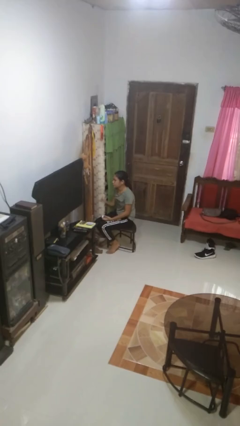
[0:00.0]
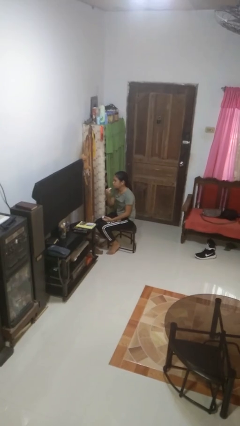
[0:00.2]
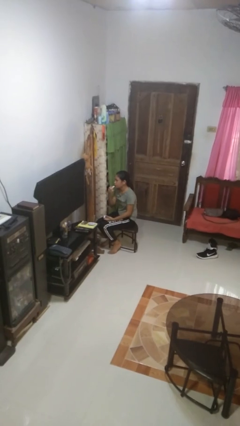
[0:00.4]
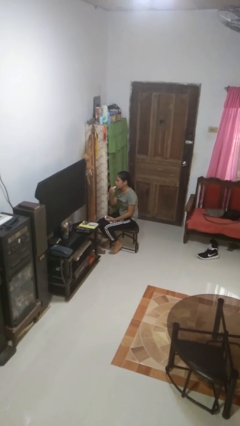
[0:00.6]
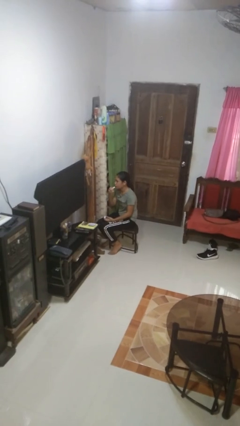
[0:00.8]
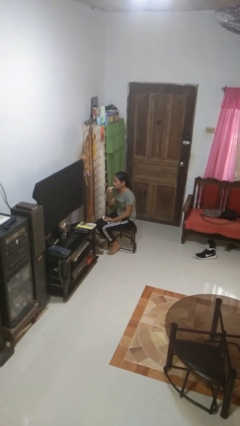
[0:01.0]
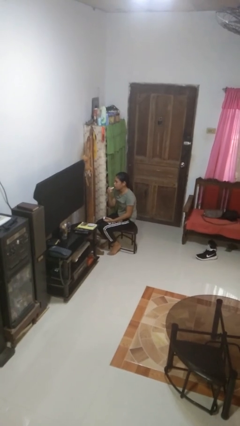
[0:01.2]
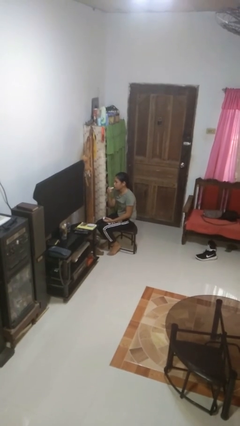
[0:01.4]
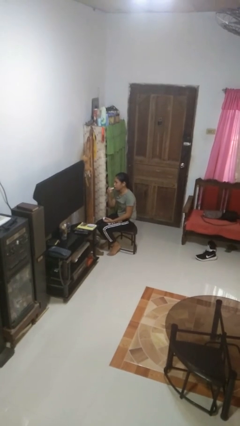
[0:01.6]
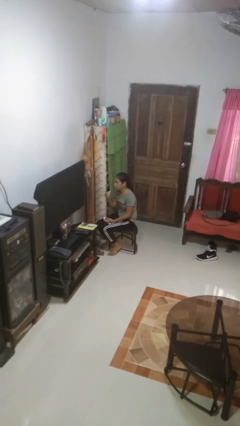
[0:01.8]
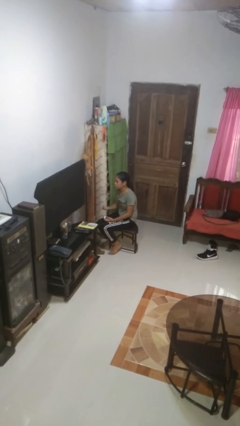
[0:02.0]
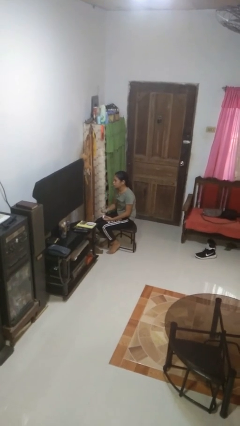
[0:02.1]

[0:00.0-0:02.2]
person applies lip makeup

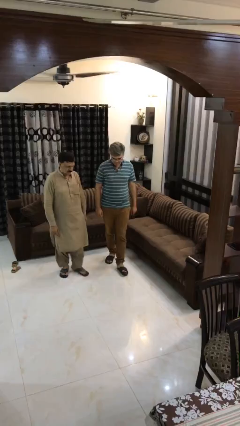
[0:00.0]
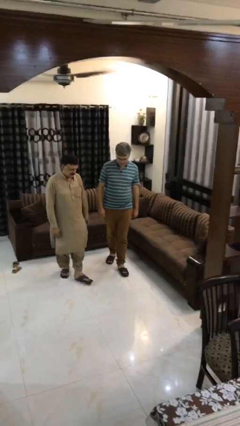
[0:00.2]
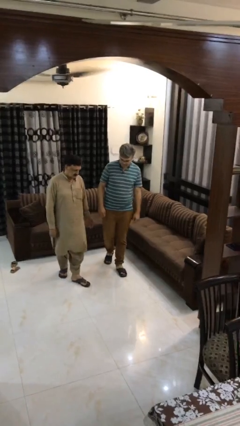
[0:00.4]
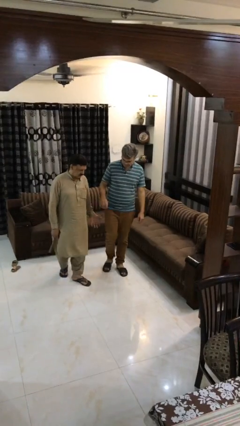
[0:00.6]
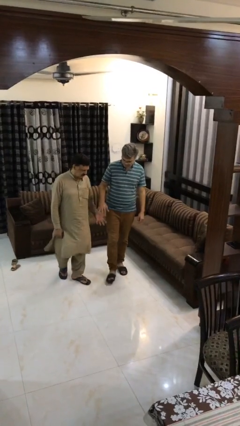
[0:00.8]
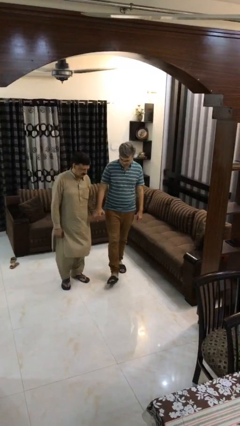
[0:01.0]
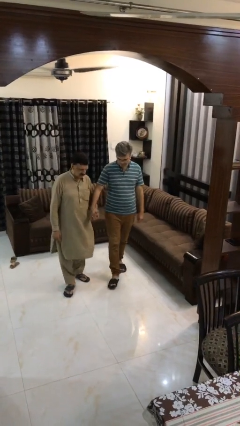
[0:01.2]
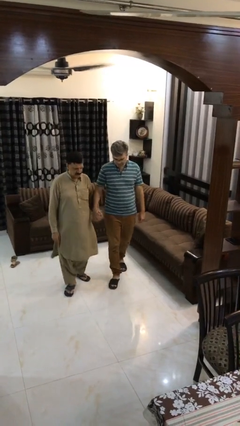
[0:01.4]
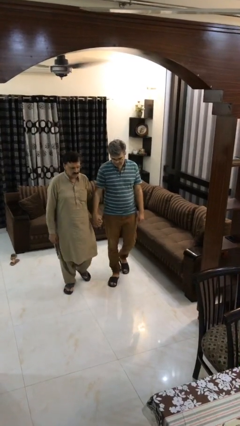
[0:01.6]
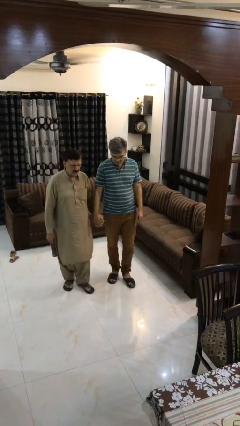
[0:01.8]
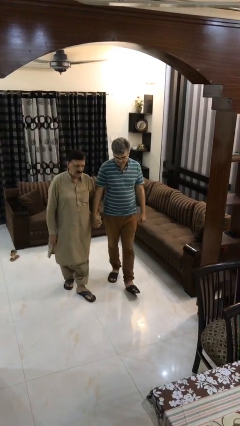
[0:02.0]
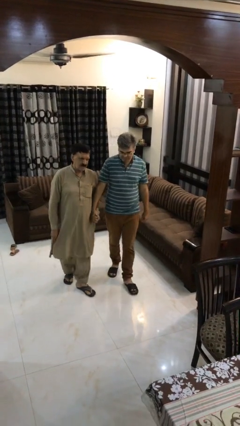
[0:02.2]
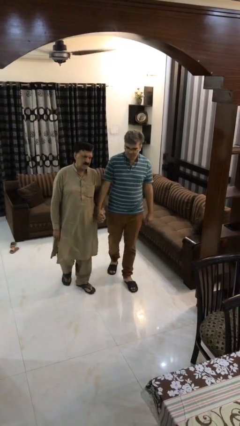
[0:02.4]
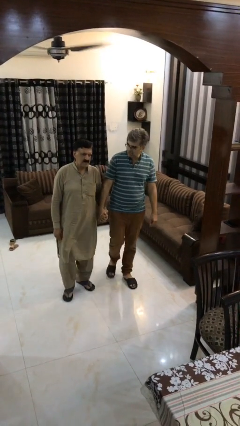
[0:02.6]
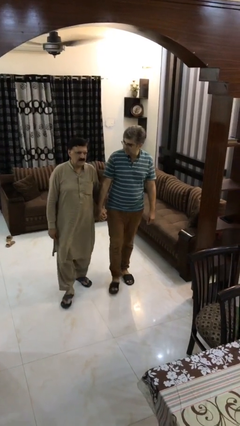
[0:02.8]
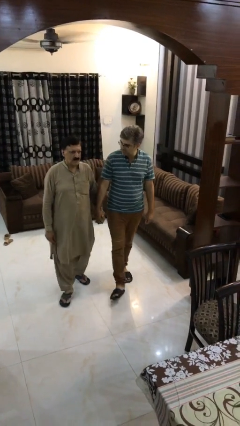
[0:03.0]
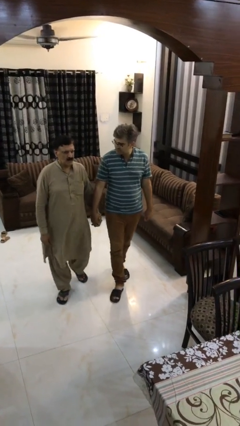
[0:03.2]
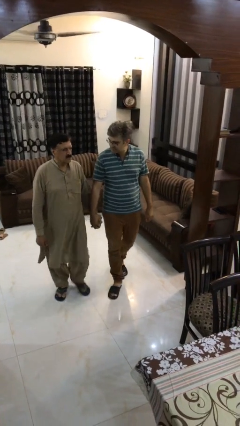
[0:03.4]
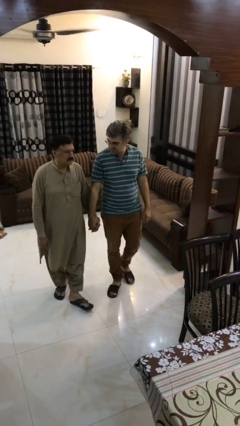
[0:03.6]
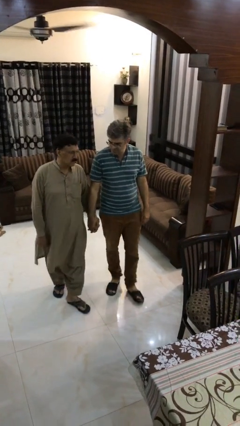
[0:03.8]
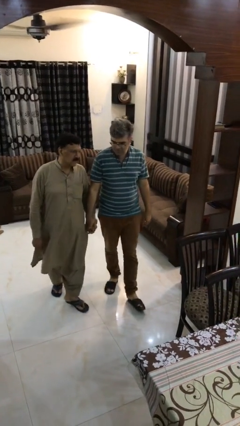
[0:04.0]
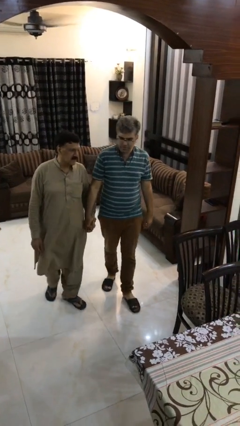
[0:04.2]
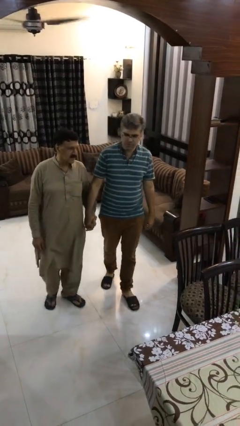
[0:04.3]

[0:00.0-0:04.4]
person holds hand

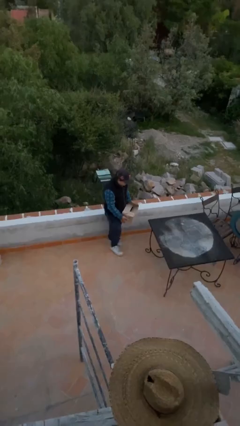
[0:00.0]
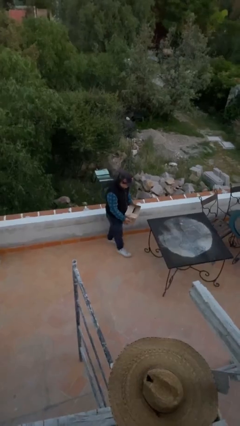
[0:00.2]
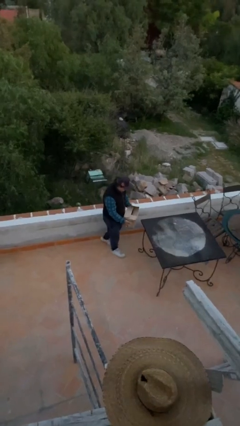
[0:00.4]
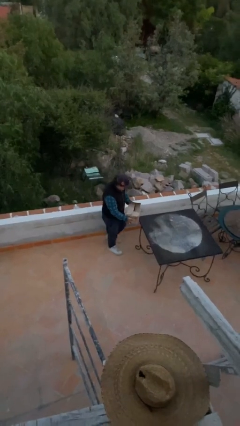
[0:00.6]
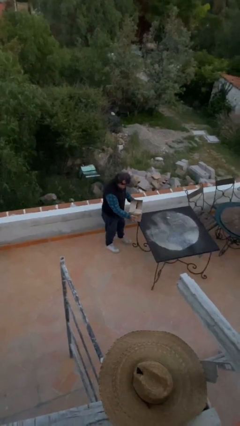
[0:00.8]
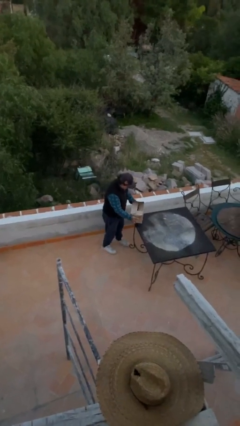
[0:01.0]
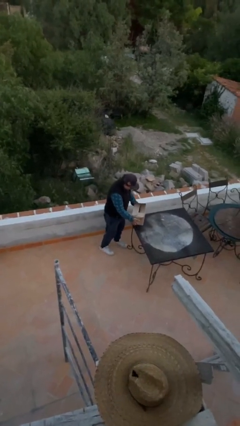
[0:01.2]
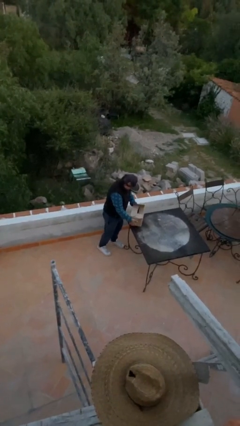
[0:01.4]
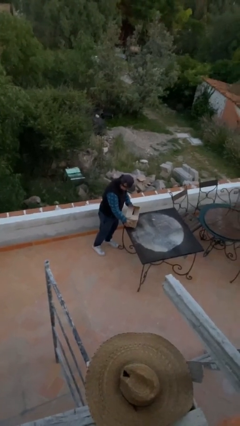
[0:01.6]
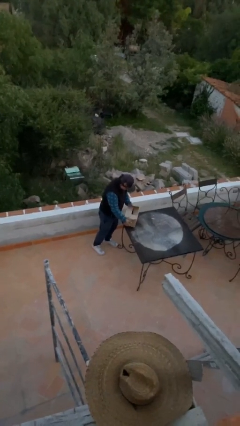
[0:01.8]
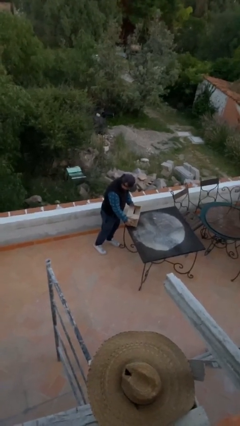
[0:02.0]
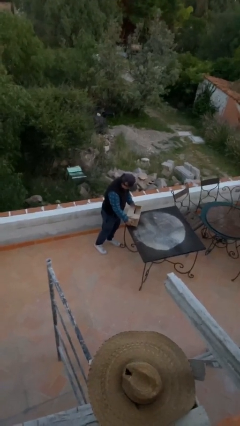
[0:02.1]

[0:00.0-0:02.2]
person puts down object on table

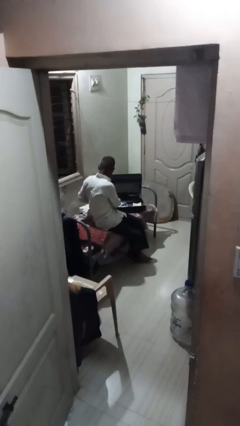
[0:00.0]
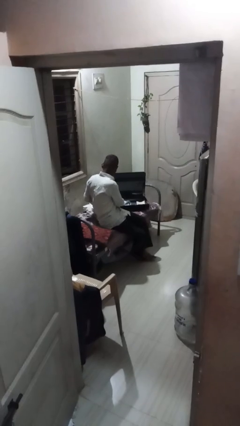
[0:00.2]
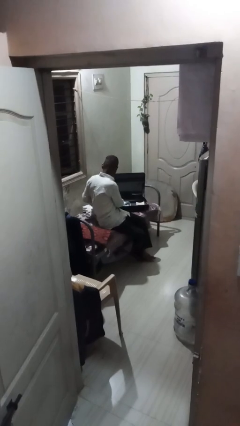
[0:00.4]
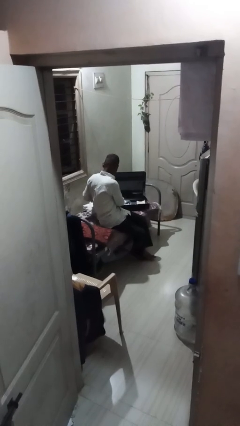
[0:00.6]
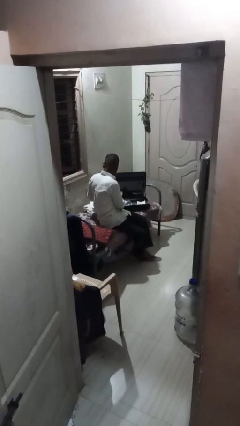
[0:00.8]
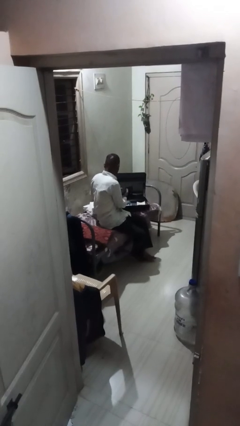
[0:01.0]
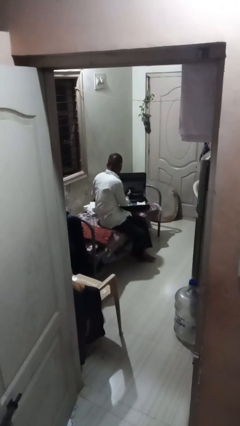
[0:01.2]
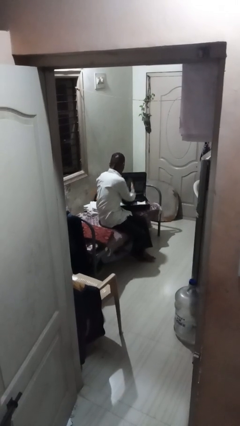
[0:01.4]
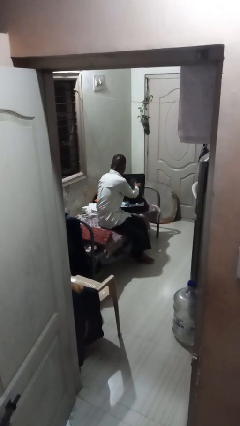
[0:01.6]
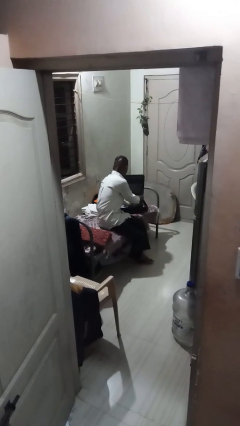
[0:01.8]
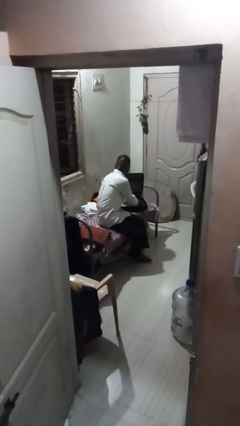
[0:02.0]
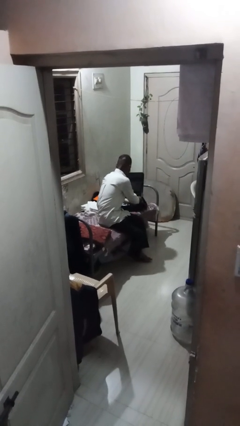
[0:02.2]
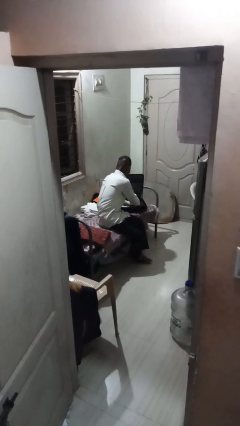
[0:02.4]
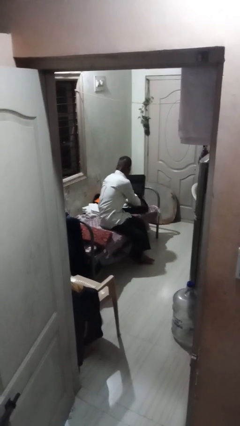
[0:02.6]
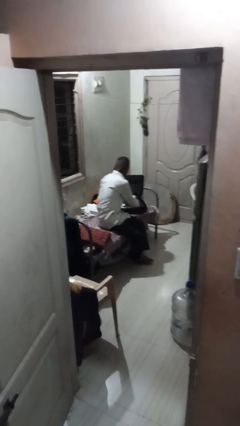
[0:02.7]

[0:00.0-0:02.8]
person loads clothes into suitcase

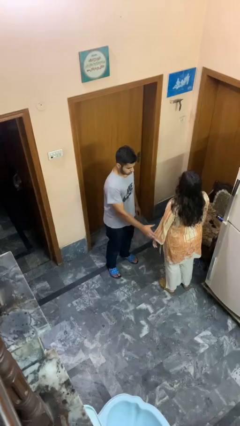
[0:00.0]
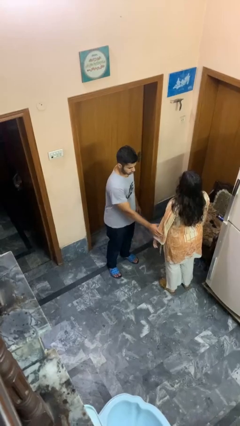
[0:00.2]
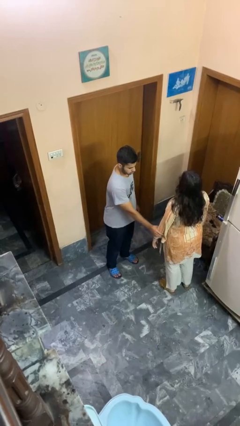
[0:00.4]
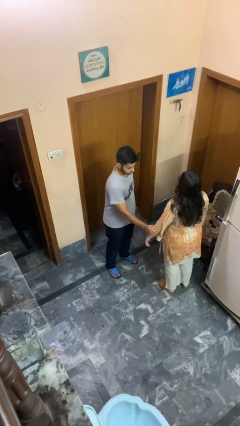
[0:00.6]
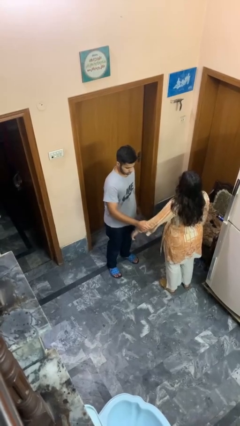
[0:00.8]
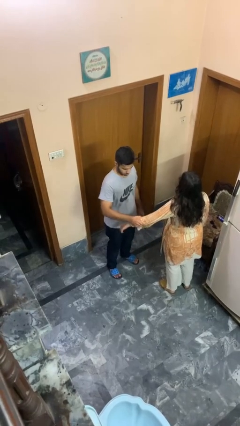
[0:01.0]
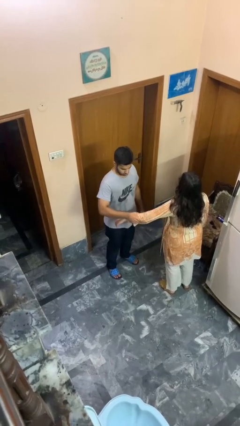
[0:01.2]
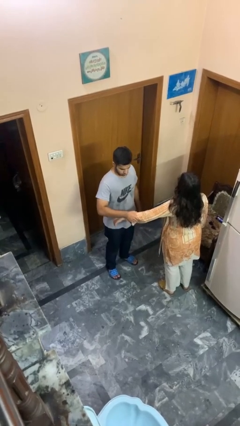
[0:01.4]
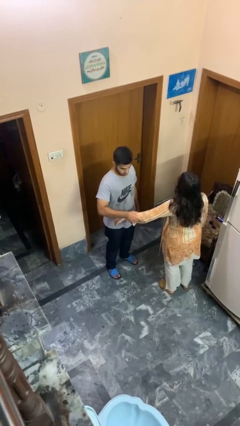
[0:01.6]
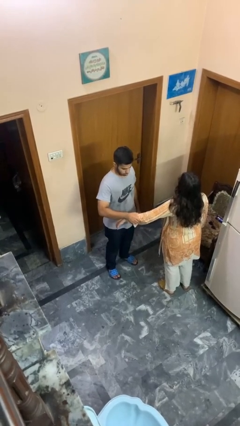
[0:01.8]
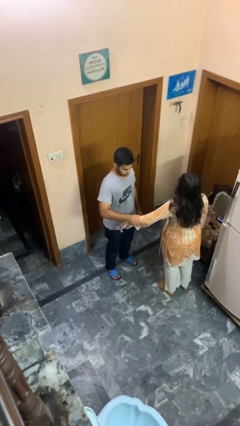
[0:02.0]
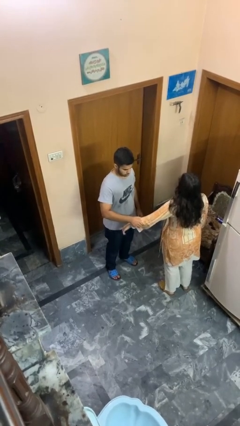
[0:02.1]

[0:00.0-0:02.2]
person grabs person by forearm

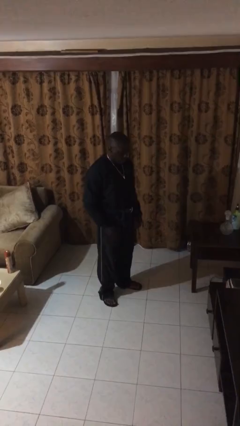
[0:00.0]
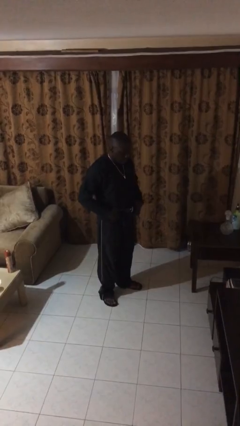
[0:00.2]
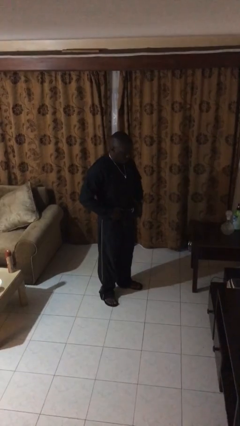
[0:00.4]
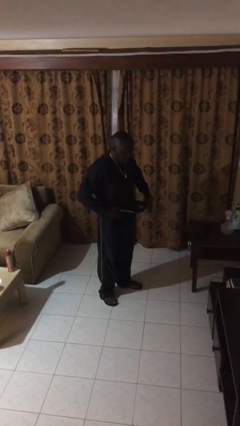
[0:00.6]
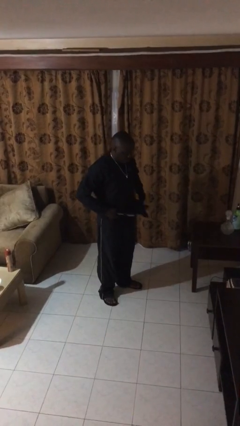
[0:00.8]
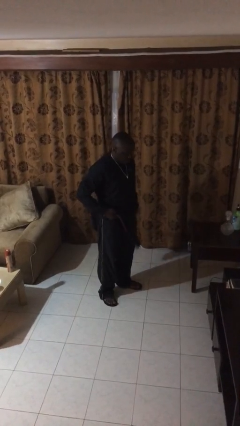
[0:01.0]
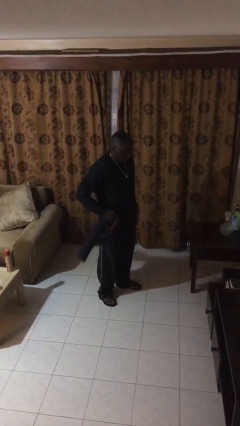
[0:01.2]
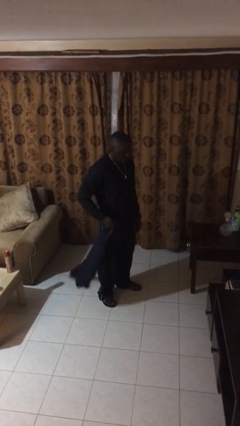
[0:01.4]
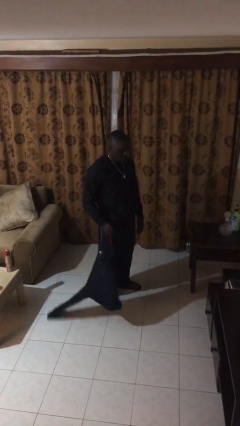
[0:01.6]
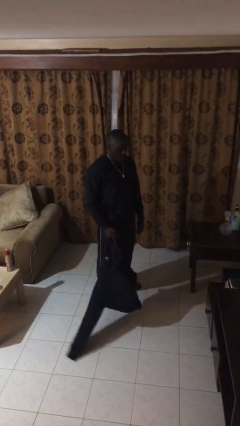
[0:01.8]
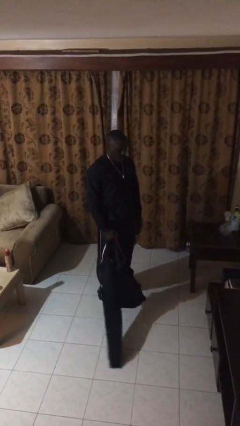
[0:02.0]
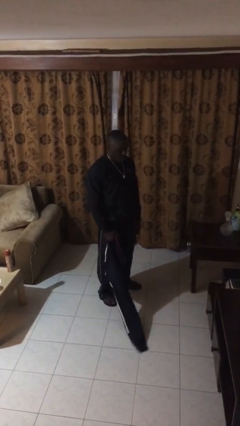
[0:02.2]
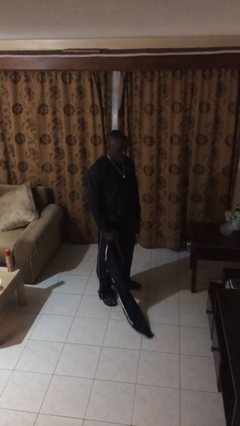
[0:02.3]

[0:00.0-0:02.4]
person unties jacket around waist

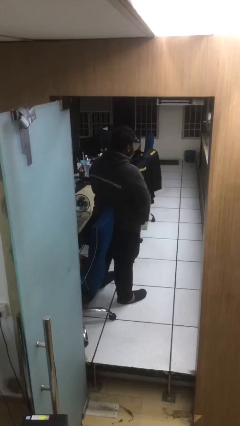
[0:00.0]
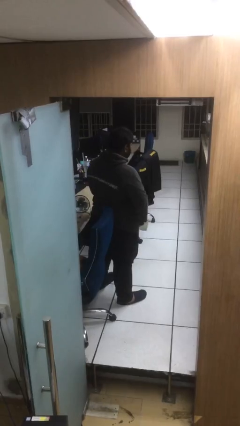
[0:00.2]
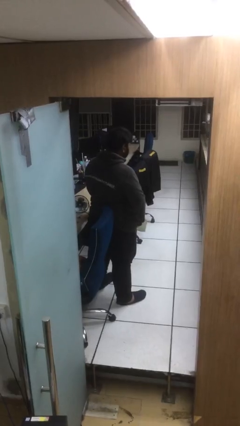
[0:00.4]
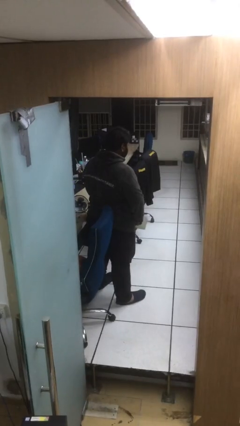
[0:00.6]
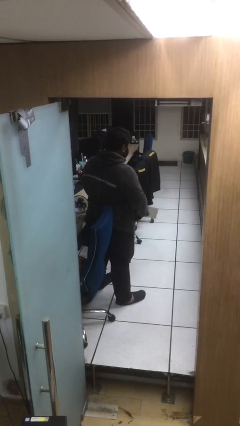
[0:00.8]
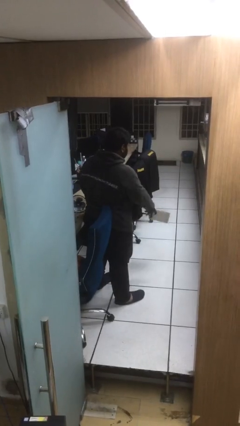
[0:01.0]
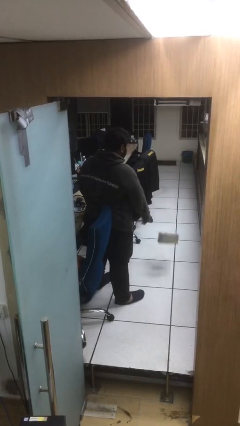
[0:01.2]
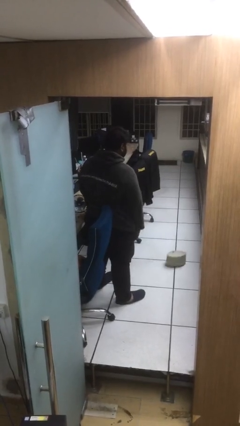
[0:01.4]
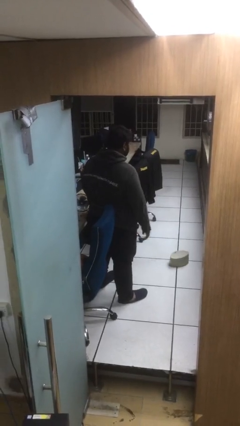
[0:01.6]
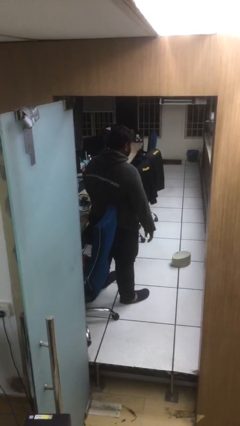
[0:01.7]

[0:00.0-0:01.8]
person throws object to ground
